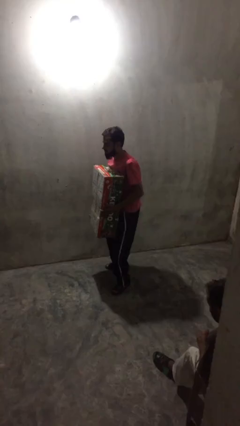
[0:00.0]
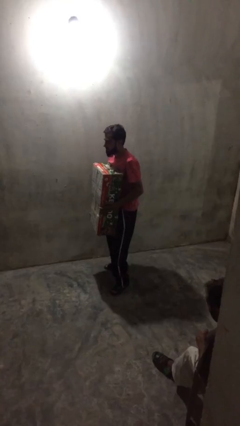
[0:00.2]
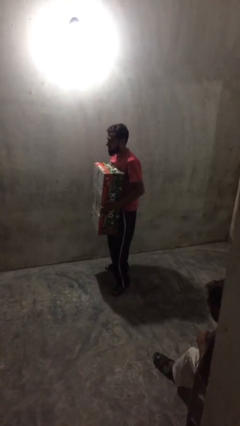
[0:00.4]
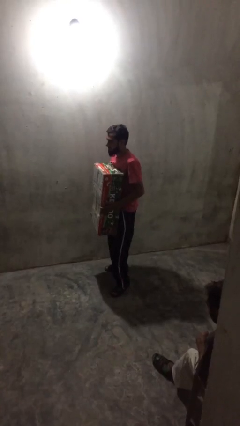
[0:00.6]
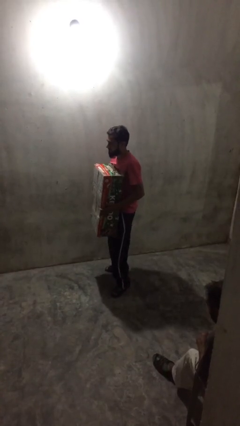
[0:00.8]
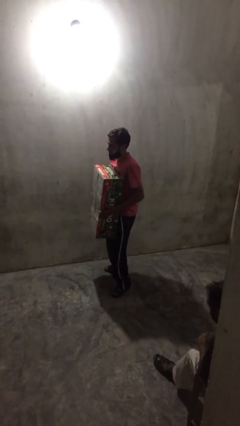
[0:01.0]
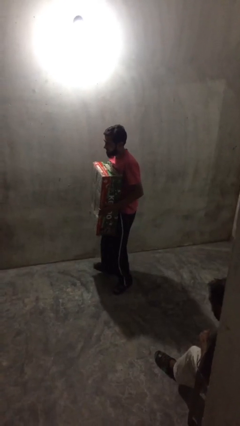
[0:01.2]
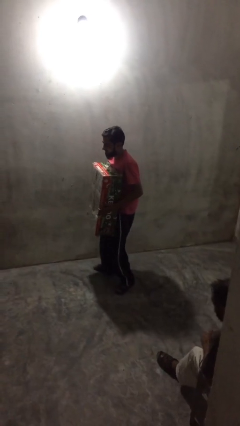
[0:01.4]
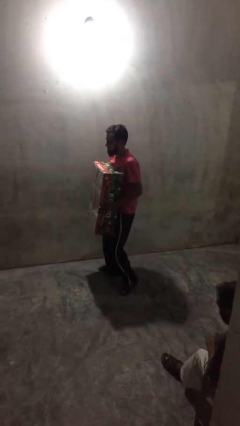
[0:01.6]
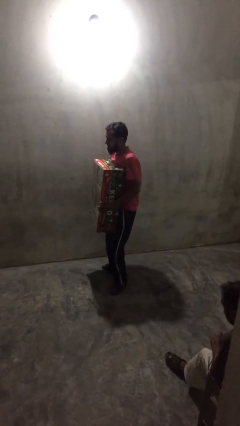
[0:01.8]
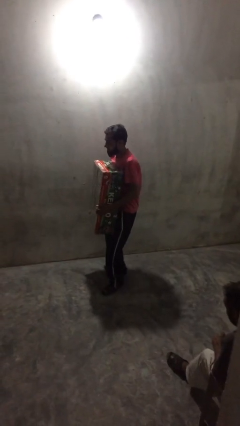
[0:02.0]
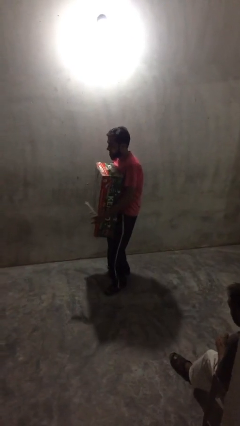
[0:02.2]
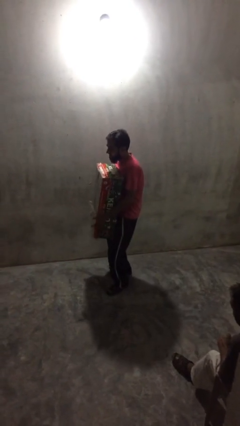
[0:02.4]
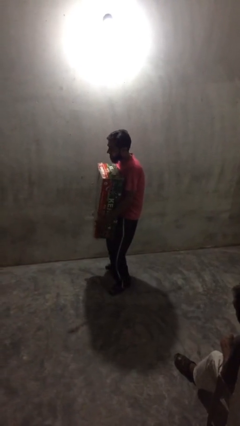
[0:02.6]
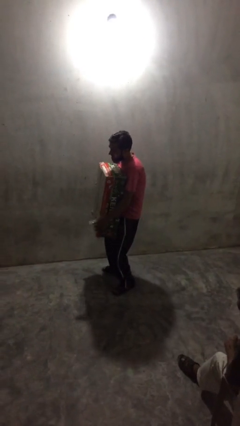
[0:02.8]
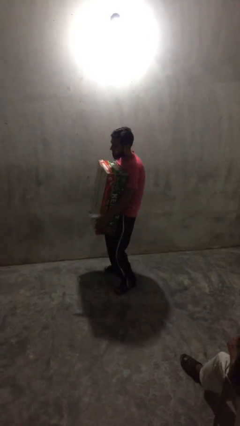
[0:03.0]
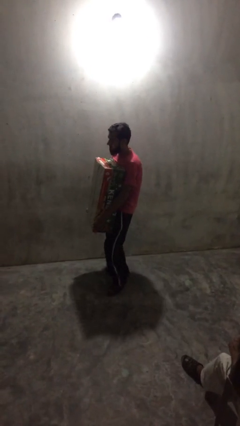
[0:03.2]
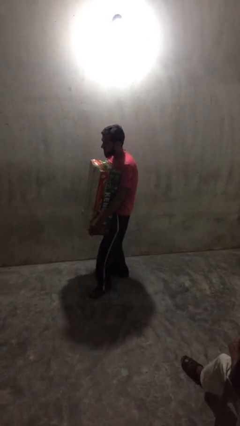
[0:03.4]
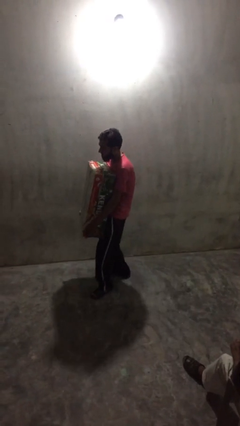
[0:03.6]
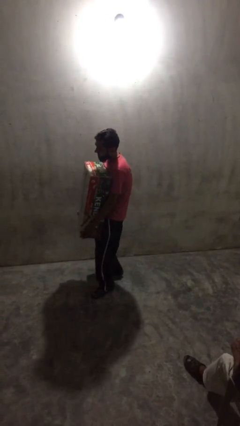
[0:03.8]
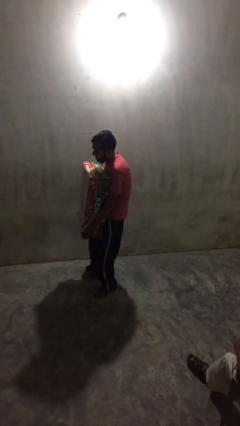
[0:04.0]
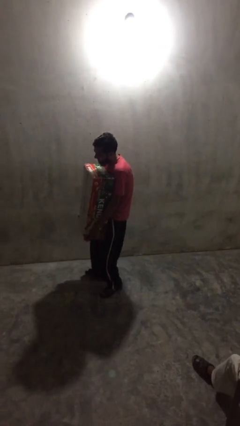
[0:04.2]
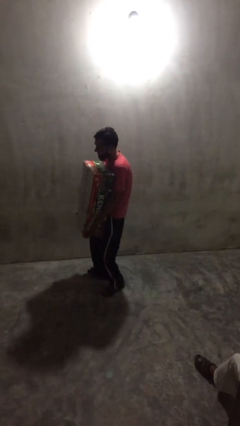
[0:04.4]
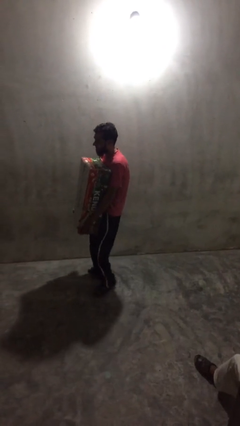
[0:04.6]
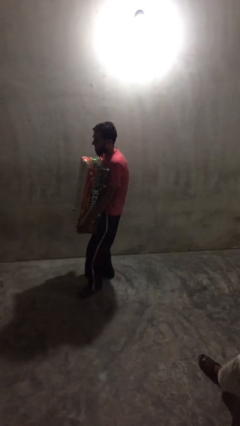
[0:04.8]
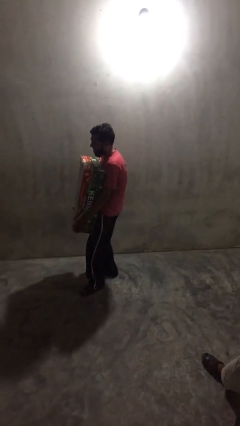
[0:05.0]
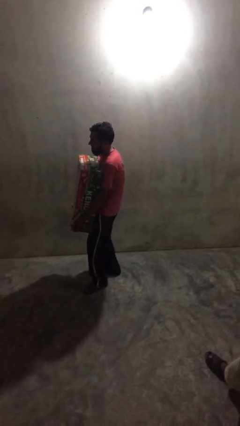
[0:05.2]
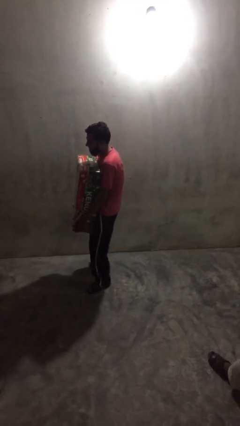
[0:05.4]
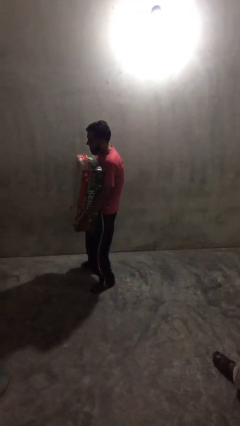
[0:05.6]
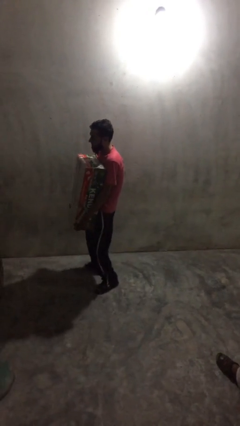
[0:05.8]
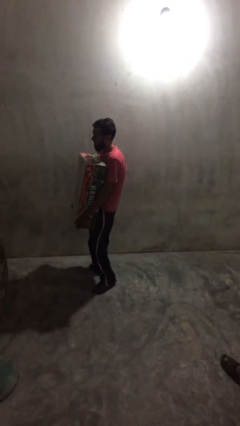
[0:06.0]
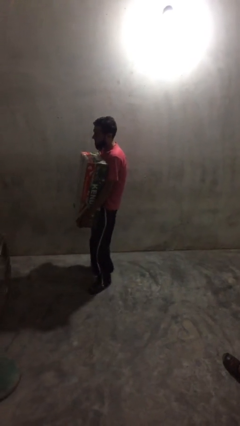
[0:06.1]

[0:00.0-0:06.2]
person carries heavy object

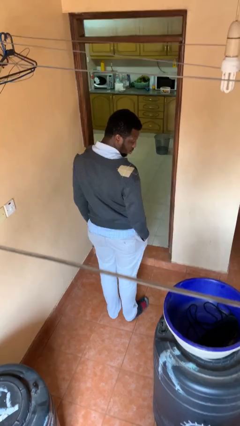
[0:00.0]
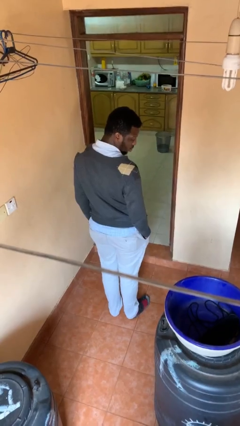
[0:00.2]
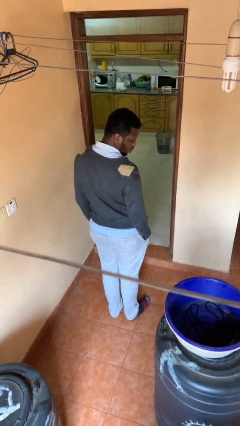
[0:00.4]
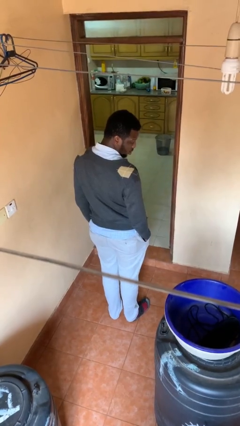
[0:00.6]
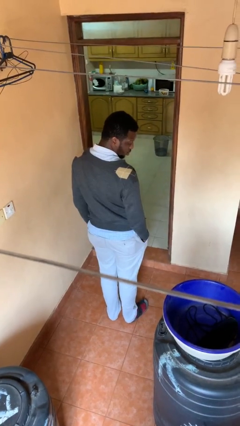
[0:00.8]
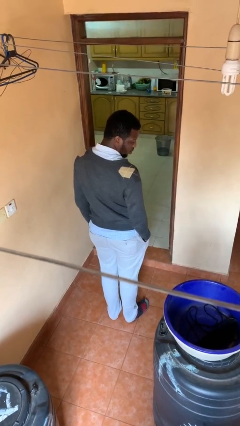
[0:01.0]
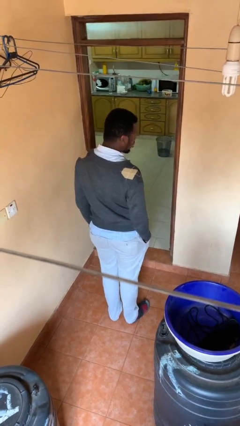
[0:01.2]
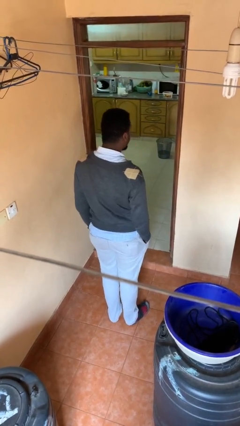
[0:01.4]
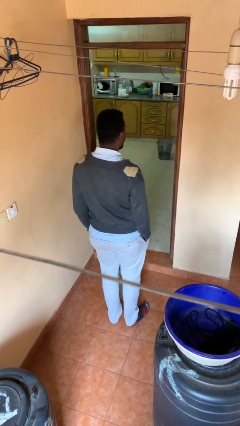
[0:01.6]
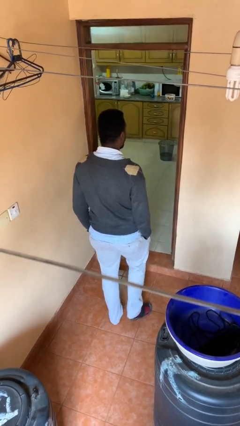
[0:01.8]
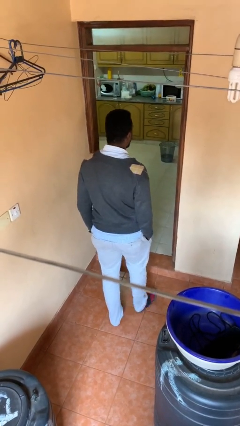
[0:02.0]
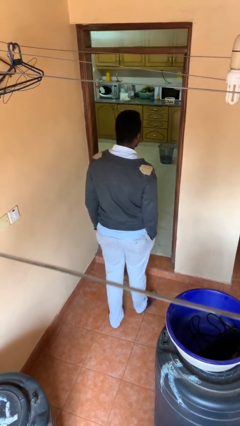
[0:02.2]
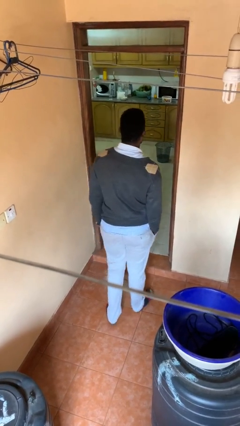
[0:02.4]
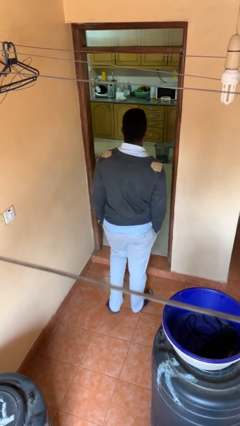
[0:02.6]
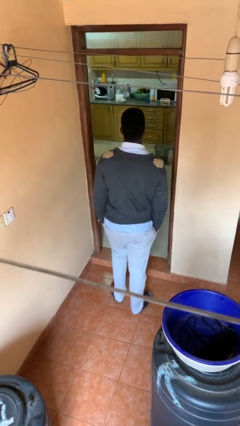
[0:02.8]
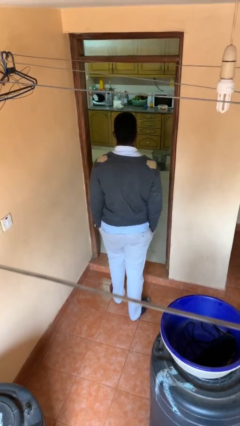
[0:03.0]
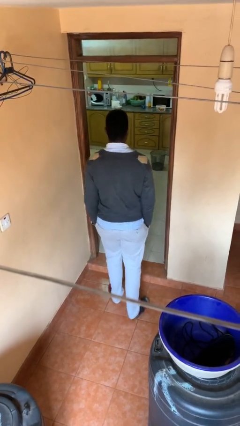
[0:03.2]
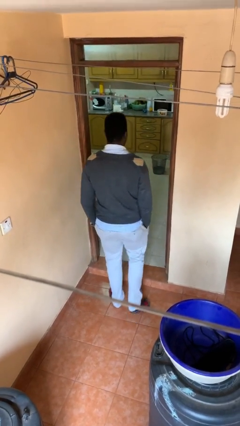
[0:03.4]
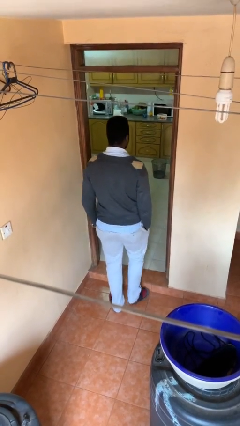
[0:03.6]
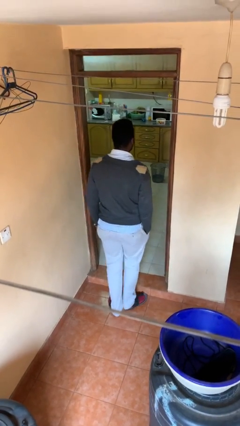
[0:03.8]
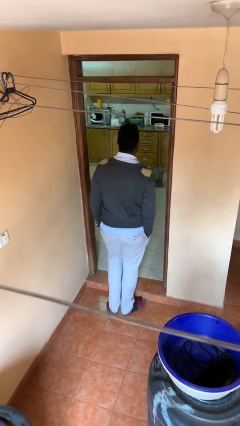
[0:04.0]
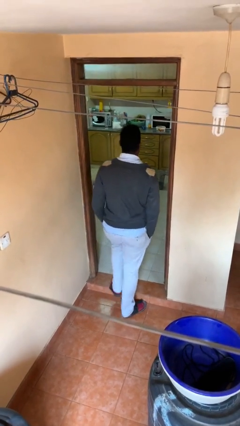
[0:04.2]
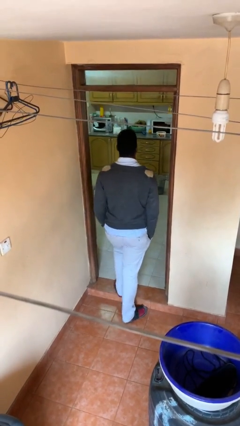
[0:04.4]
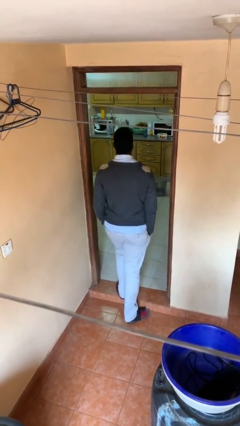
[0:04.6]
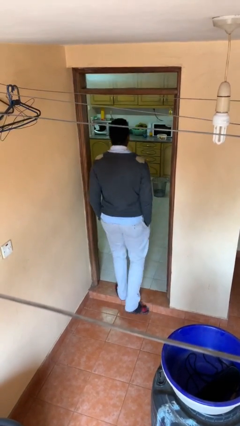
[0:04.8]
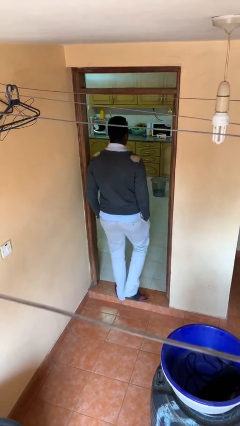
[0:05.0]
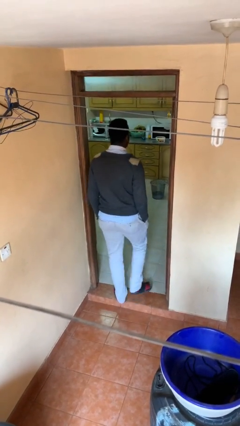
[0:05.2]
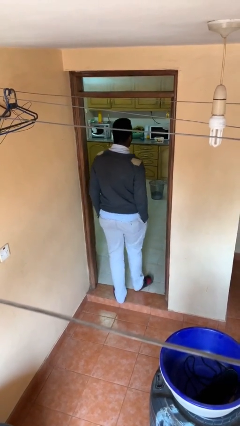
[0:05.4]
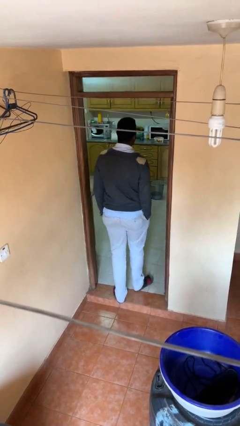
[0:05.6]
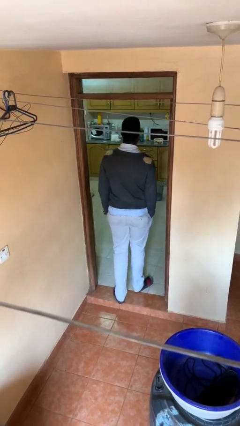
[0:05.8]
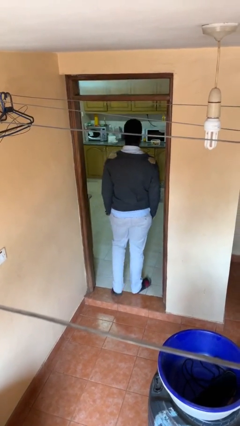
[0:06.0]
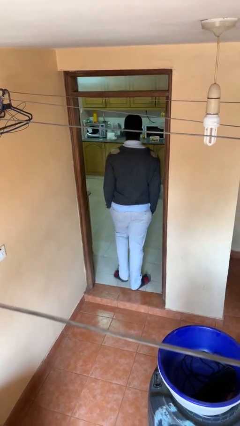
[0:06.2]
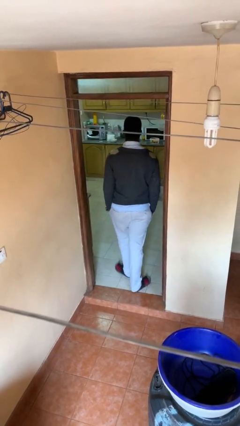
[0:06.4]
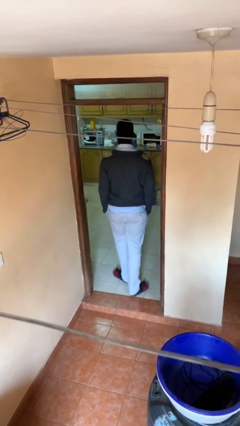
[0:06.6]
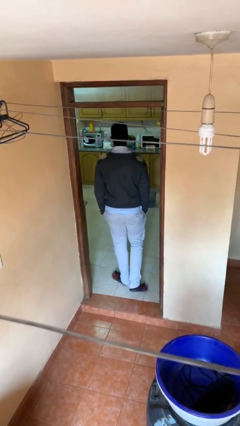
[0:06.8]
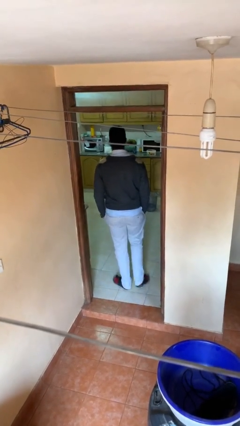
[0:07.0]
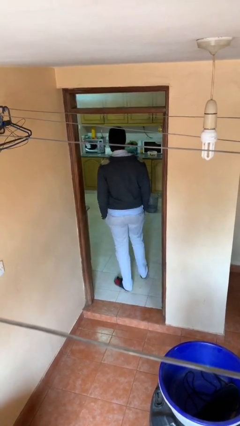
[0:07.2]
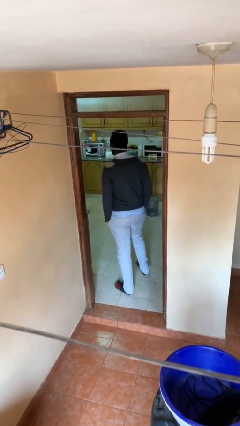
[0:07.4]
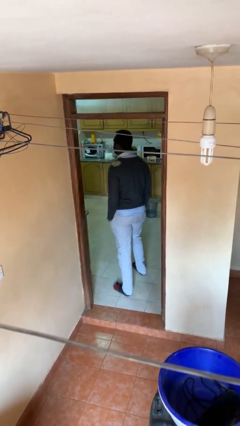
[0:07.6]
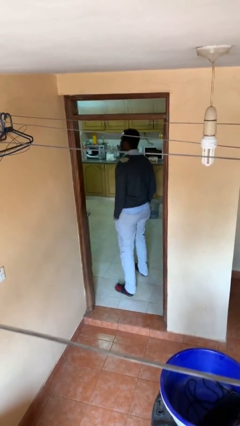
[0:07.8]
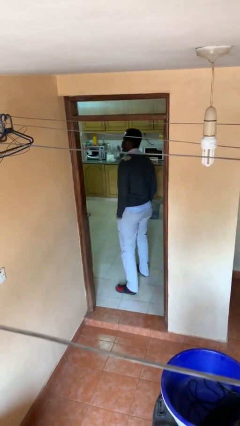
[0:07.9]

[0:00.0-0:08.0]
person exits scene through structure

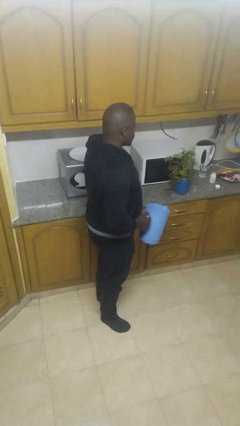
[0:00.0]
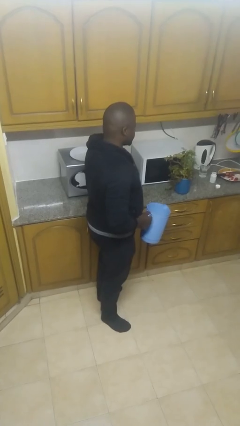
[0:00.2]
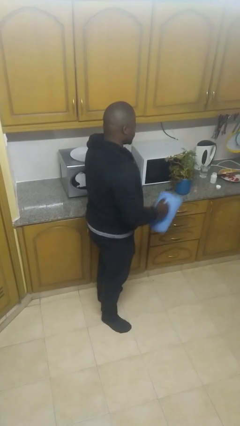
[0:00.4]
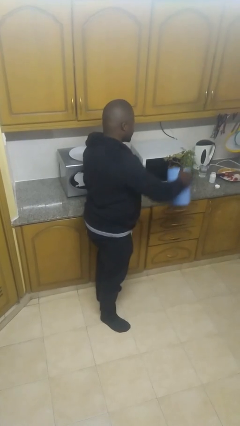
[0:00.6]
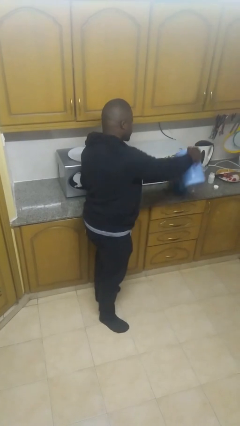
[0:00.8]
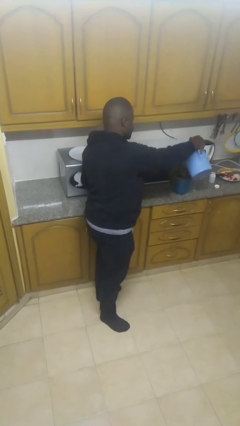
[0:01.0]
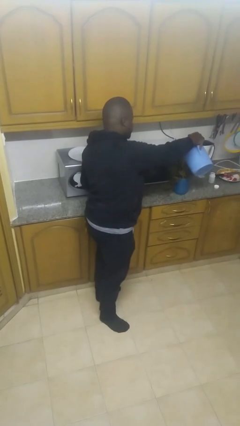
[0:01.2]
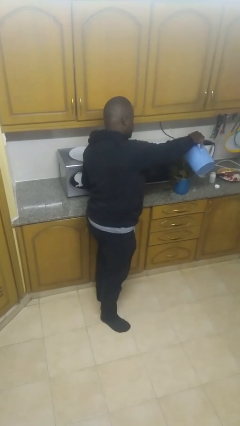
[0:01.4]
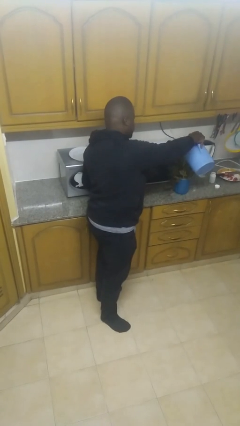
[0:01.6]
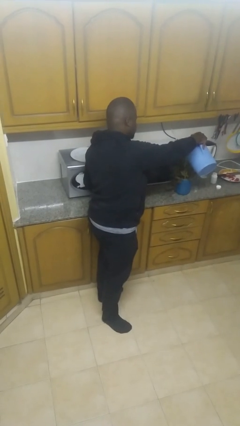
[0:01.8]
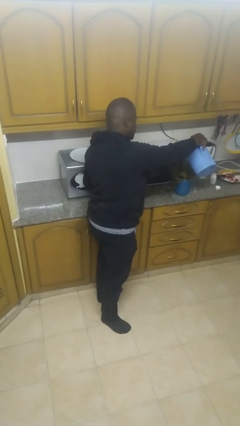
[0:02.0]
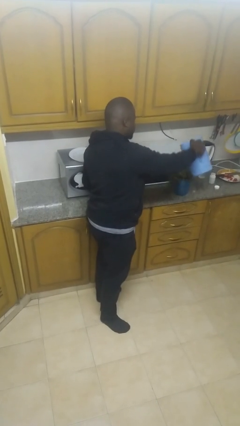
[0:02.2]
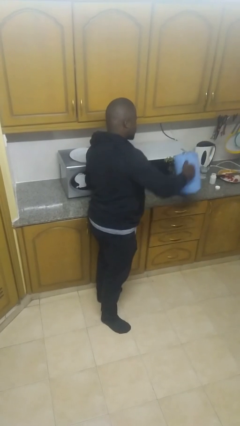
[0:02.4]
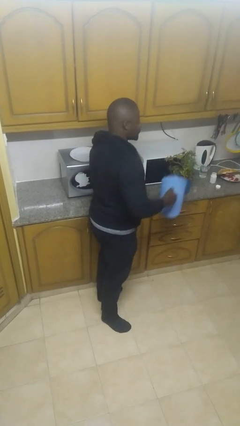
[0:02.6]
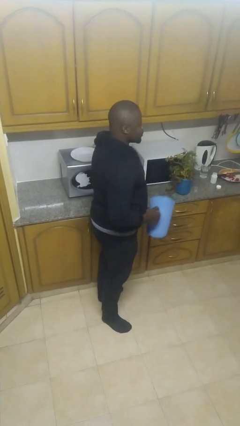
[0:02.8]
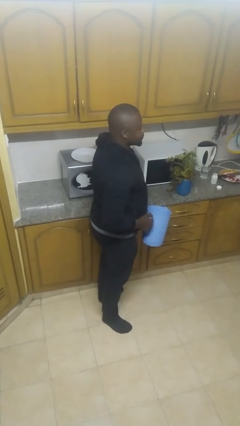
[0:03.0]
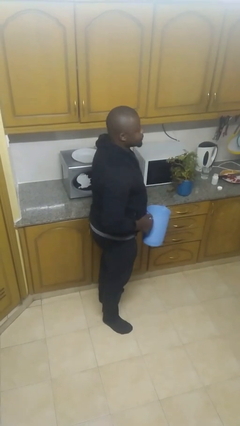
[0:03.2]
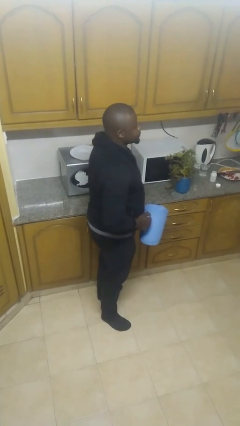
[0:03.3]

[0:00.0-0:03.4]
person waters houseplant
